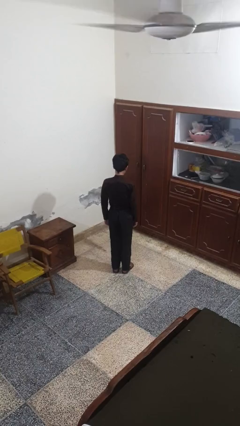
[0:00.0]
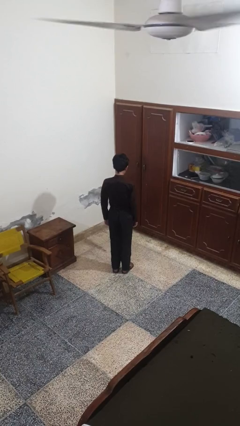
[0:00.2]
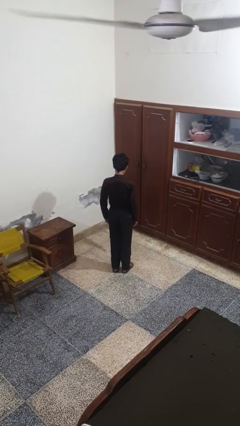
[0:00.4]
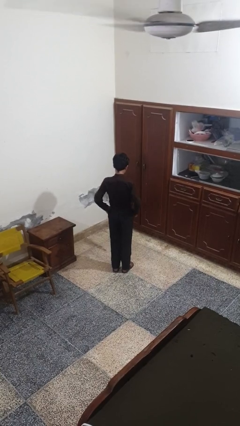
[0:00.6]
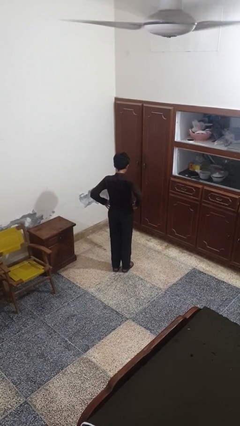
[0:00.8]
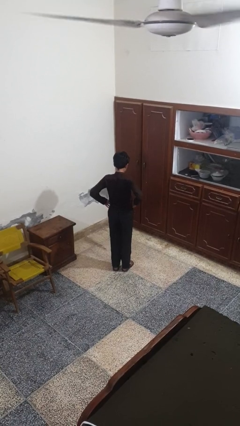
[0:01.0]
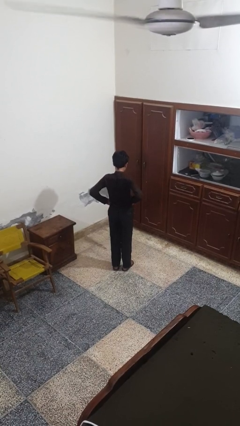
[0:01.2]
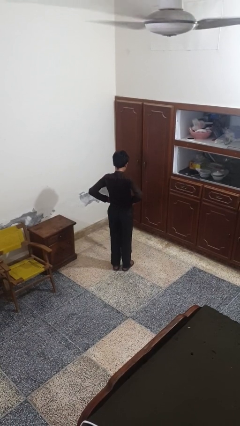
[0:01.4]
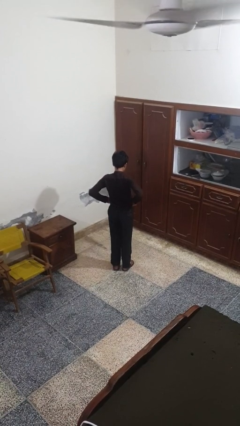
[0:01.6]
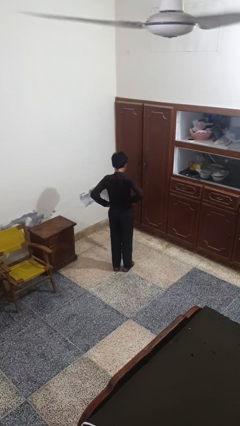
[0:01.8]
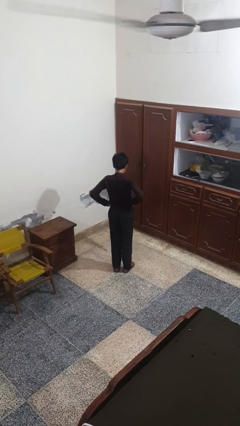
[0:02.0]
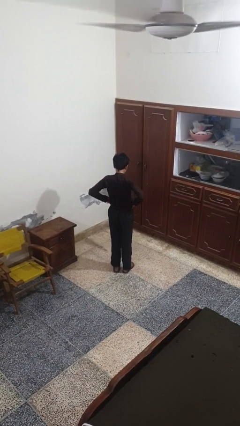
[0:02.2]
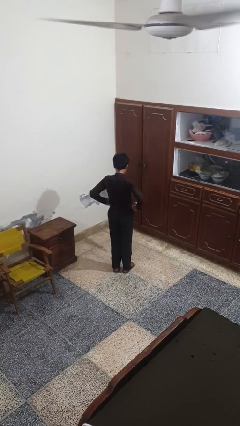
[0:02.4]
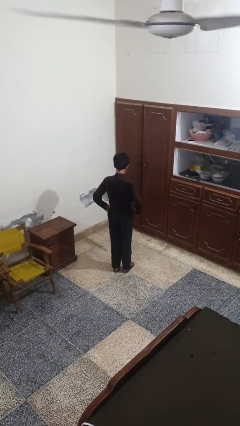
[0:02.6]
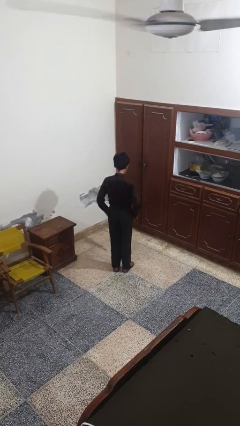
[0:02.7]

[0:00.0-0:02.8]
person hikes up pants

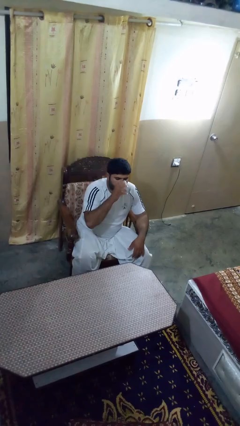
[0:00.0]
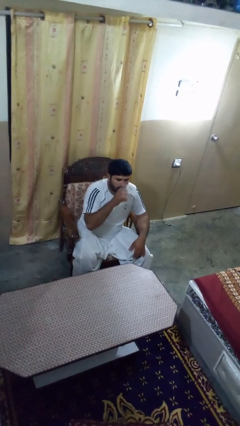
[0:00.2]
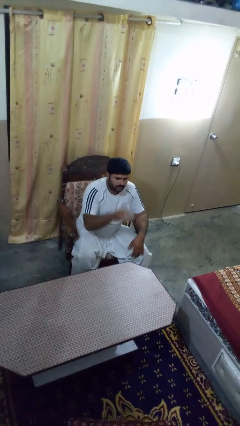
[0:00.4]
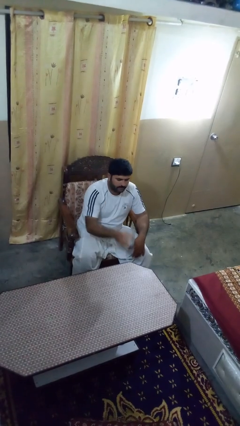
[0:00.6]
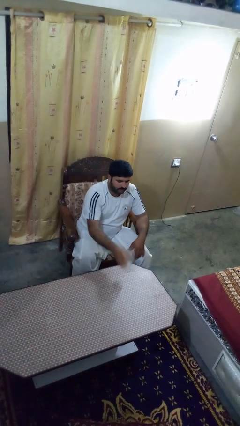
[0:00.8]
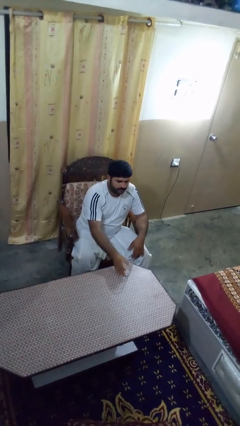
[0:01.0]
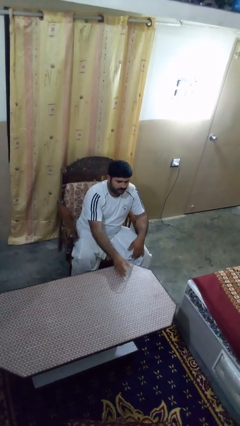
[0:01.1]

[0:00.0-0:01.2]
person puts down object on table

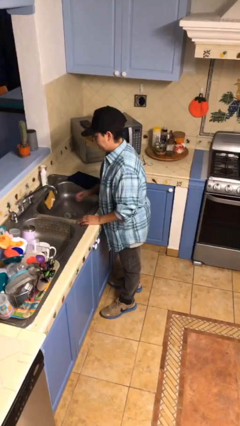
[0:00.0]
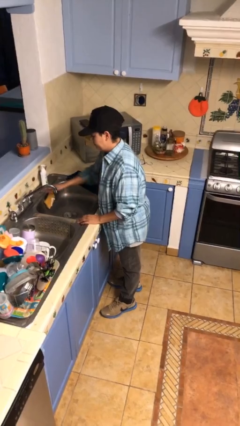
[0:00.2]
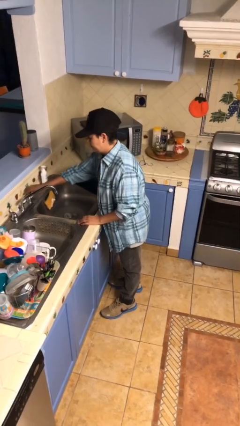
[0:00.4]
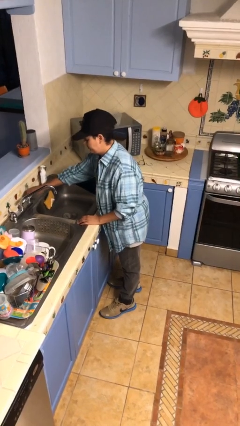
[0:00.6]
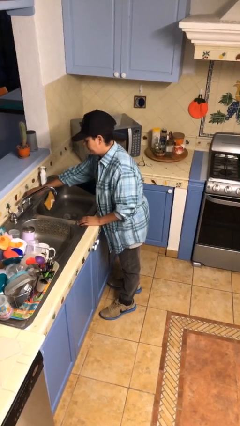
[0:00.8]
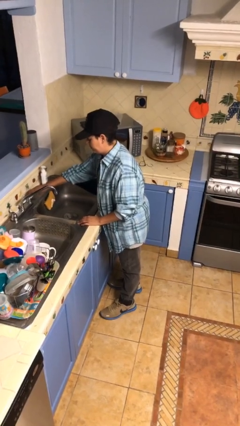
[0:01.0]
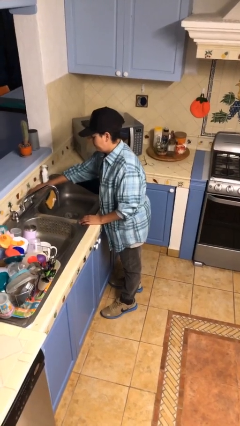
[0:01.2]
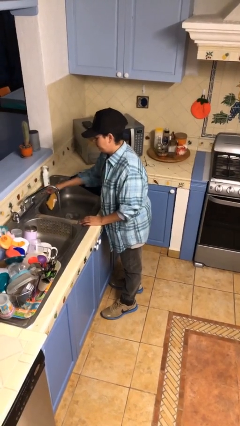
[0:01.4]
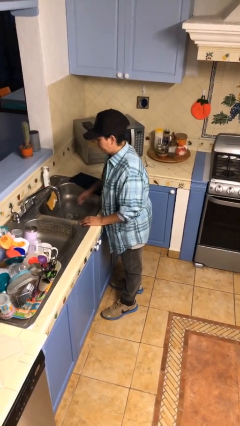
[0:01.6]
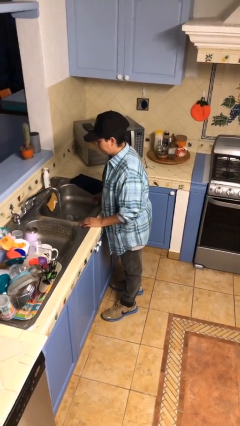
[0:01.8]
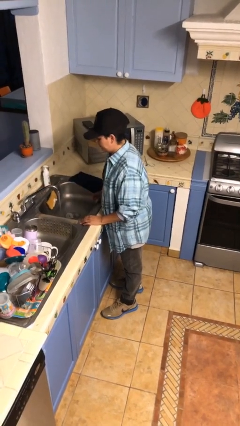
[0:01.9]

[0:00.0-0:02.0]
person turns on faucet

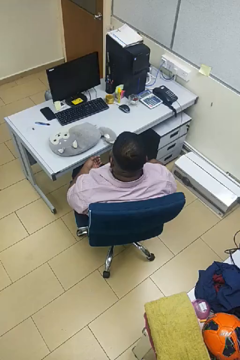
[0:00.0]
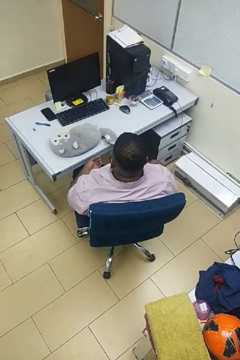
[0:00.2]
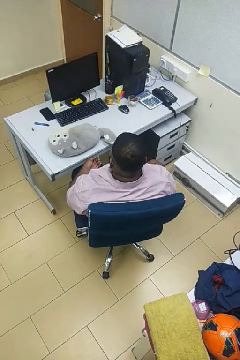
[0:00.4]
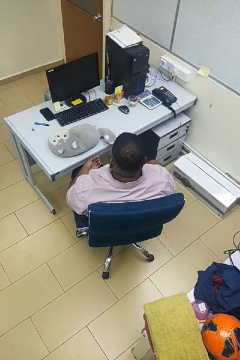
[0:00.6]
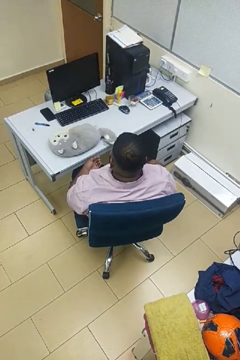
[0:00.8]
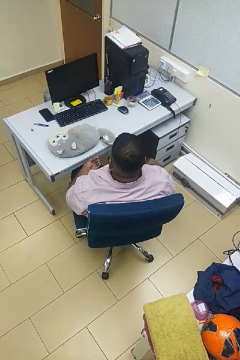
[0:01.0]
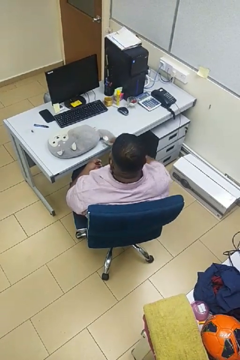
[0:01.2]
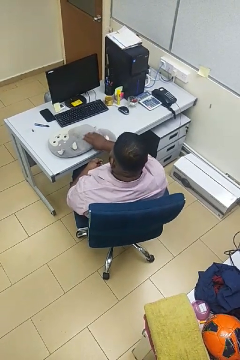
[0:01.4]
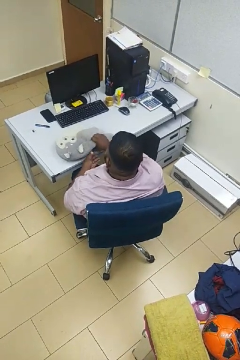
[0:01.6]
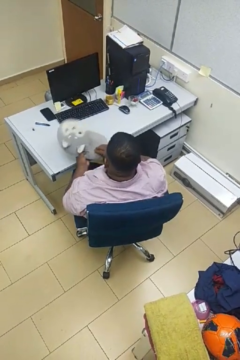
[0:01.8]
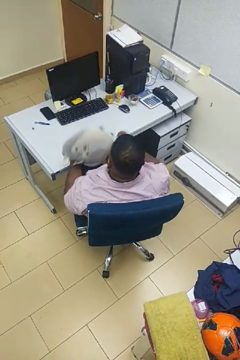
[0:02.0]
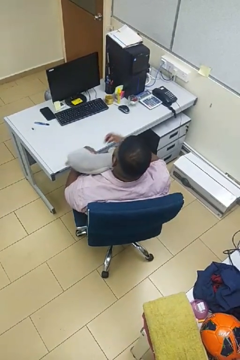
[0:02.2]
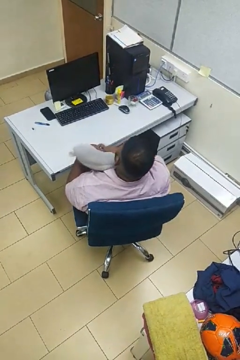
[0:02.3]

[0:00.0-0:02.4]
person hugs stuffed animal

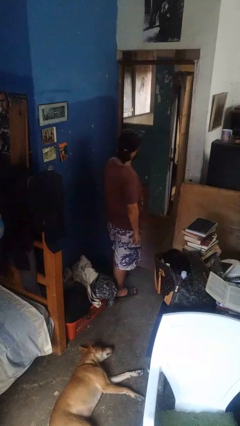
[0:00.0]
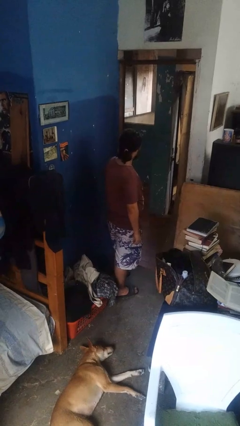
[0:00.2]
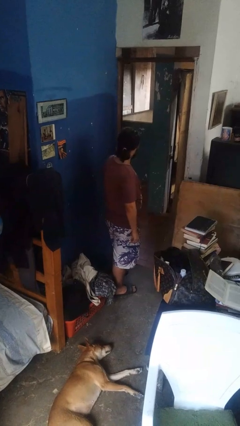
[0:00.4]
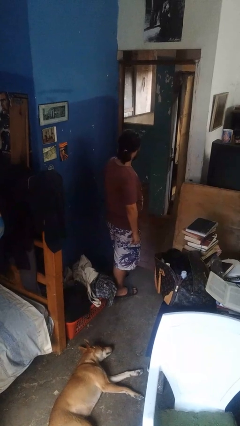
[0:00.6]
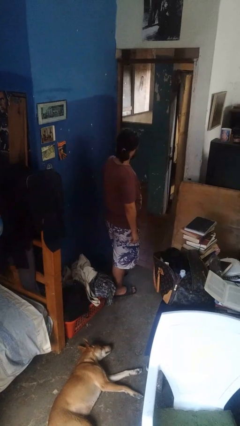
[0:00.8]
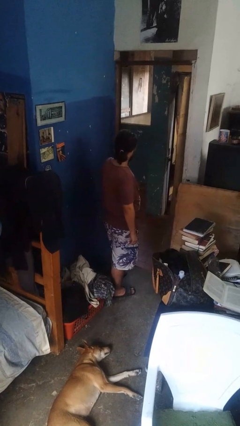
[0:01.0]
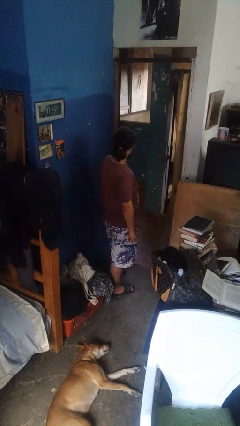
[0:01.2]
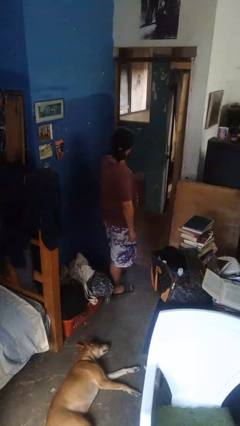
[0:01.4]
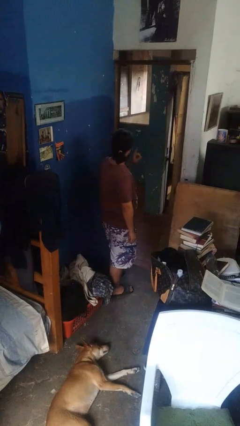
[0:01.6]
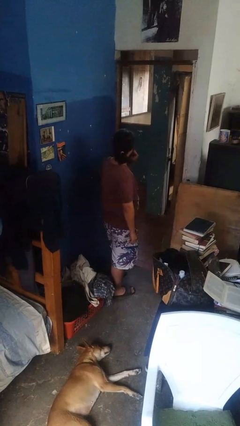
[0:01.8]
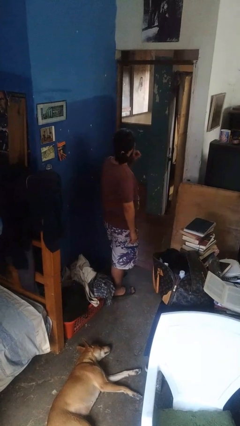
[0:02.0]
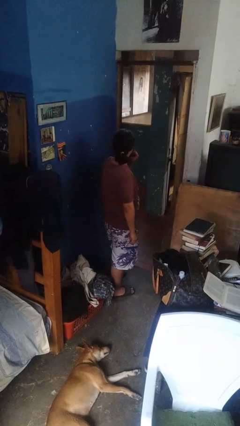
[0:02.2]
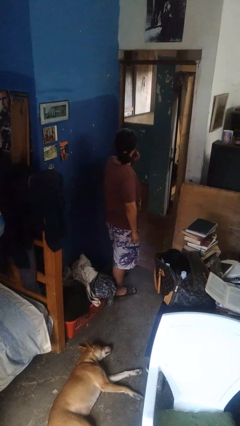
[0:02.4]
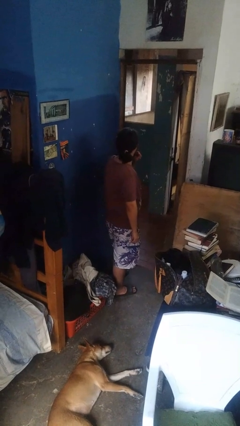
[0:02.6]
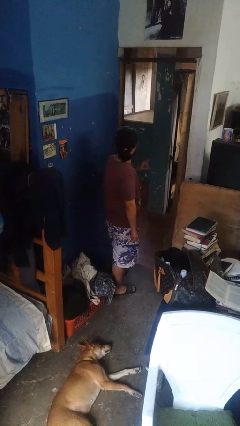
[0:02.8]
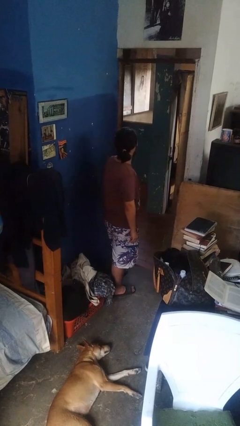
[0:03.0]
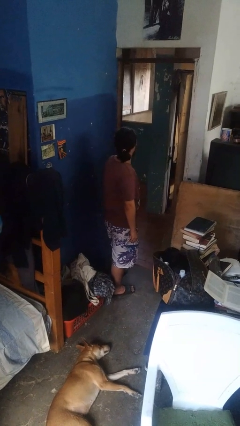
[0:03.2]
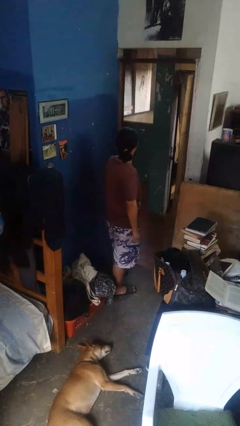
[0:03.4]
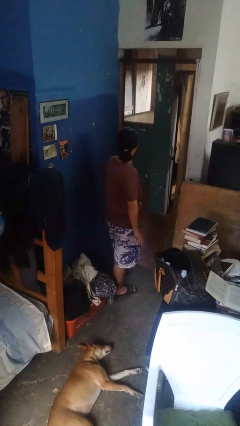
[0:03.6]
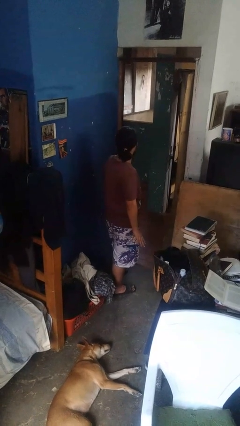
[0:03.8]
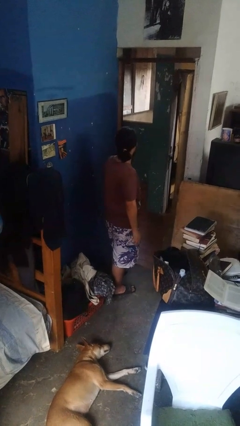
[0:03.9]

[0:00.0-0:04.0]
person gestures be quiet

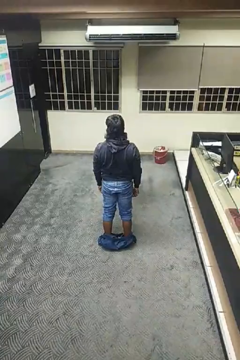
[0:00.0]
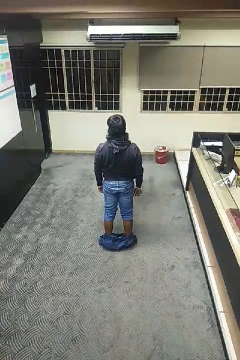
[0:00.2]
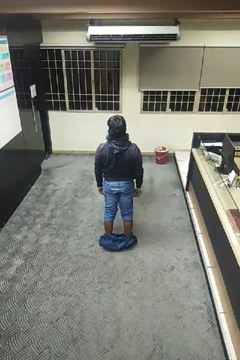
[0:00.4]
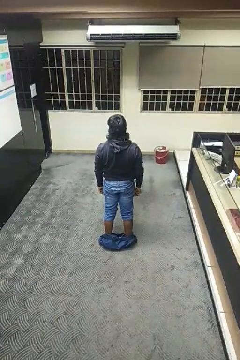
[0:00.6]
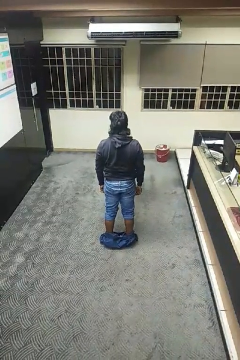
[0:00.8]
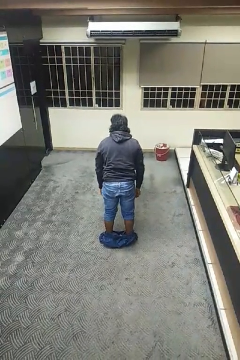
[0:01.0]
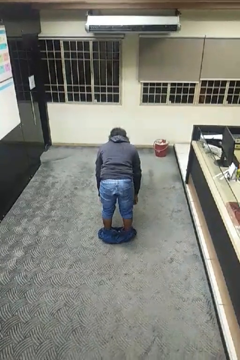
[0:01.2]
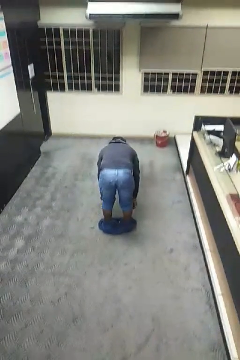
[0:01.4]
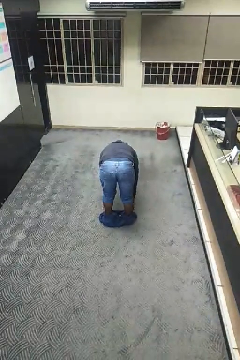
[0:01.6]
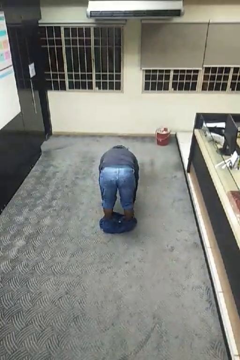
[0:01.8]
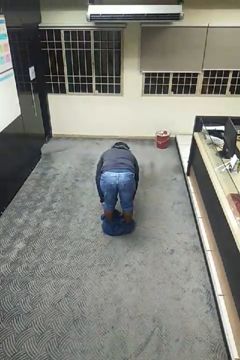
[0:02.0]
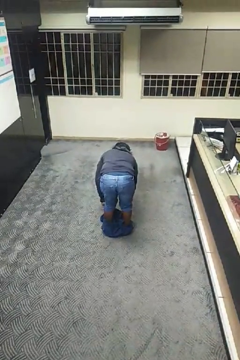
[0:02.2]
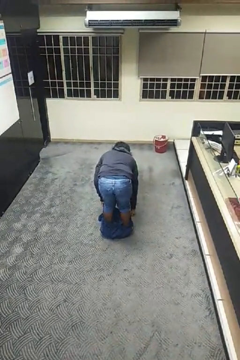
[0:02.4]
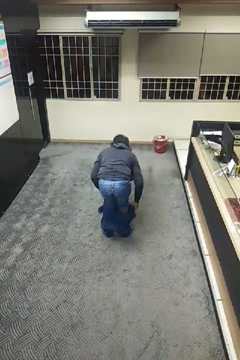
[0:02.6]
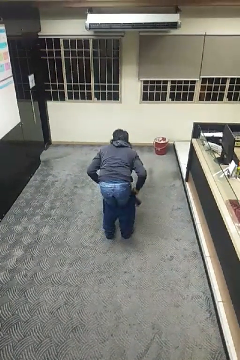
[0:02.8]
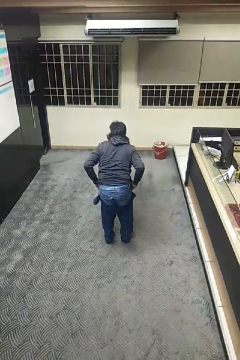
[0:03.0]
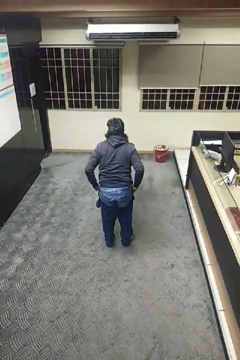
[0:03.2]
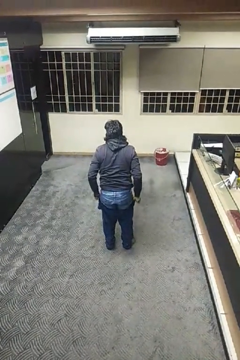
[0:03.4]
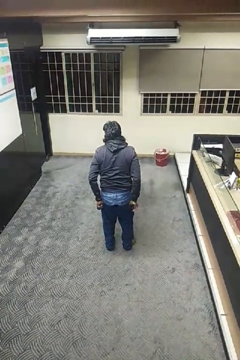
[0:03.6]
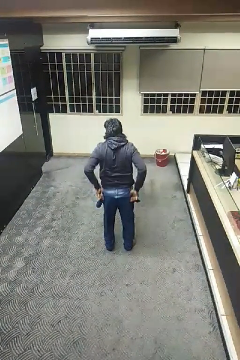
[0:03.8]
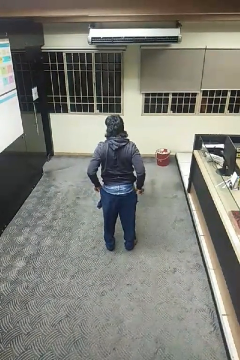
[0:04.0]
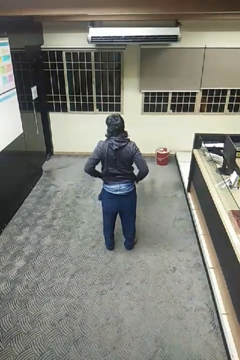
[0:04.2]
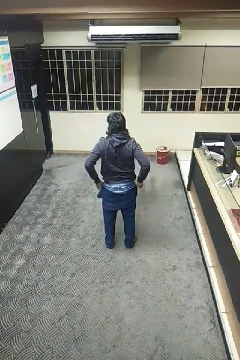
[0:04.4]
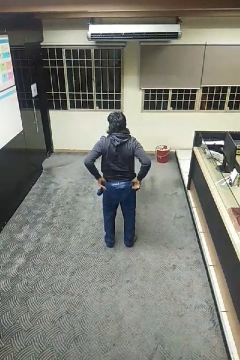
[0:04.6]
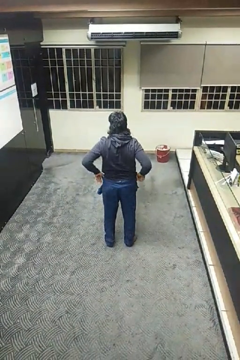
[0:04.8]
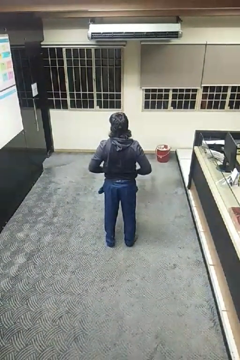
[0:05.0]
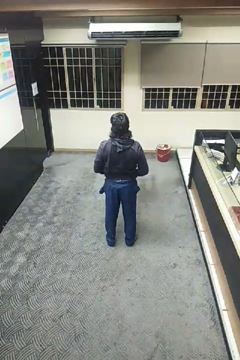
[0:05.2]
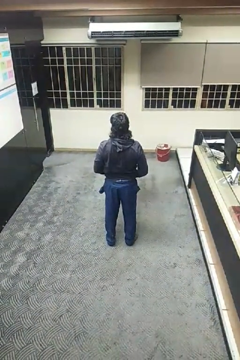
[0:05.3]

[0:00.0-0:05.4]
person puts on pants

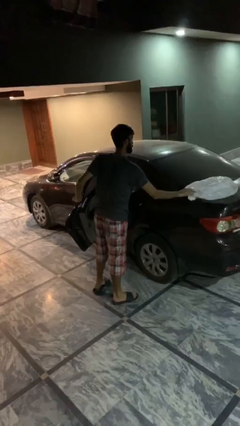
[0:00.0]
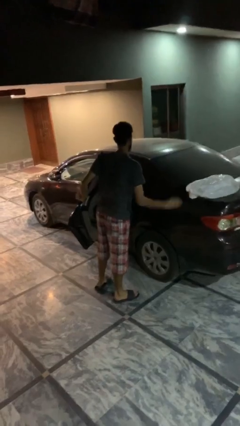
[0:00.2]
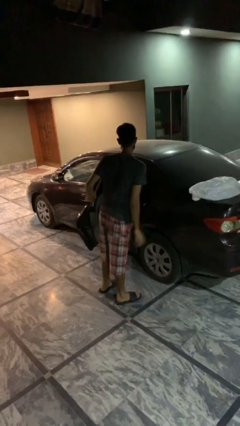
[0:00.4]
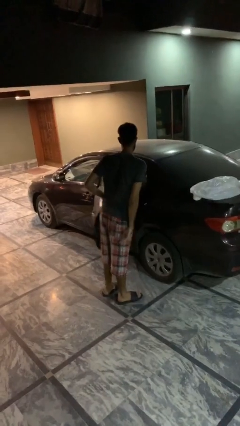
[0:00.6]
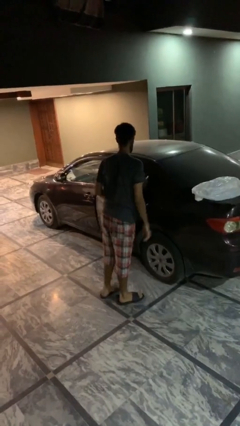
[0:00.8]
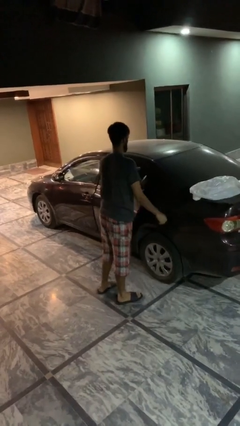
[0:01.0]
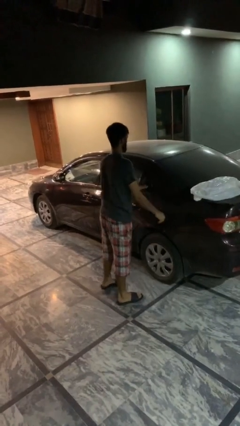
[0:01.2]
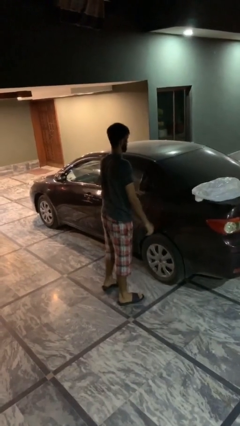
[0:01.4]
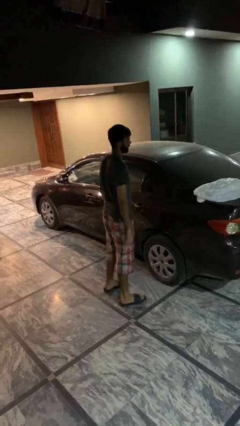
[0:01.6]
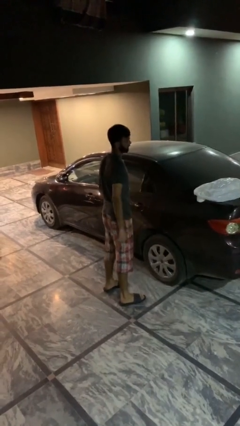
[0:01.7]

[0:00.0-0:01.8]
person closes car door
